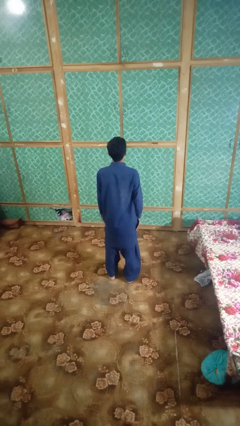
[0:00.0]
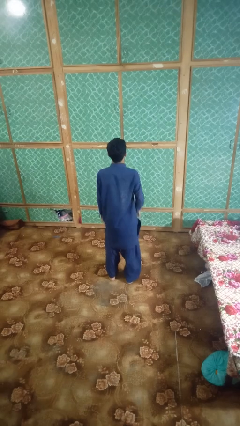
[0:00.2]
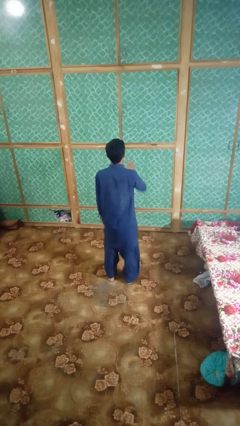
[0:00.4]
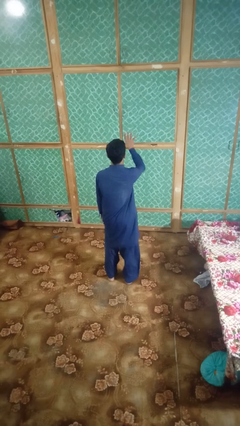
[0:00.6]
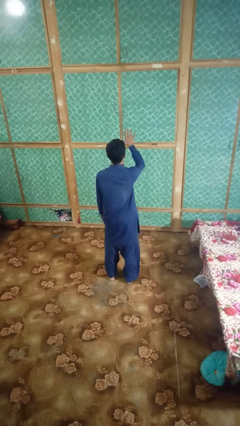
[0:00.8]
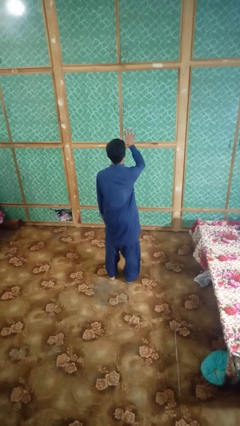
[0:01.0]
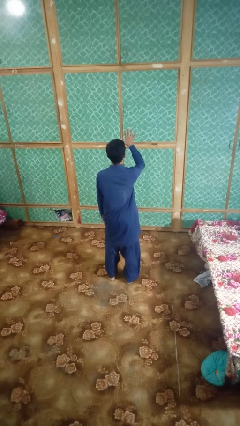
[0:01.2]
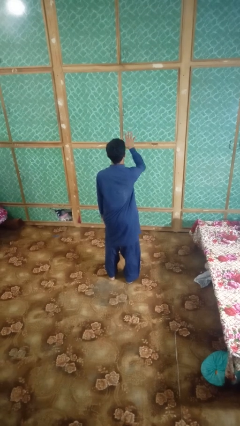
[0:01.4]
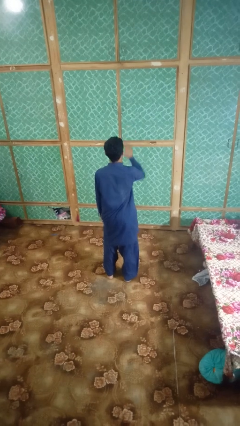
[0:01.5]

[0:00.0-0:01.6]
person gestures number five

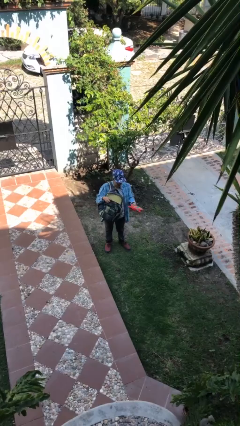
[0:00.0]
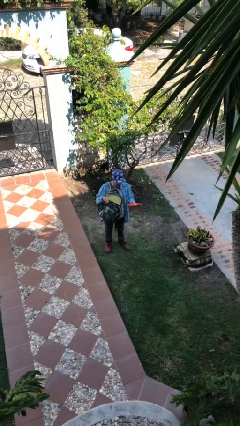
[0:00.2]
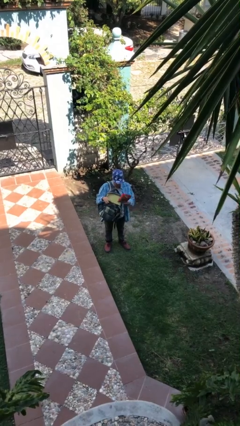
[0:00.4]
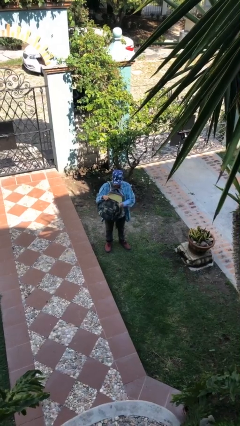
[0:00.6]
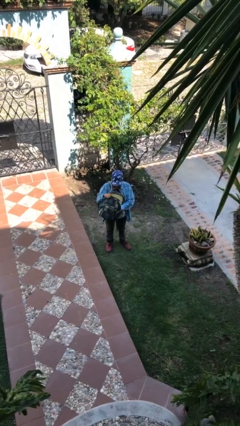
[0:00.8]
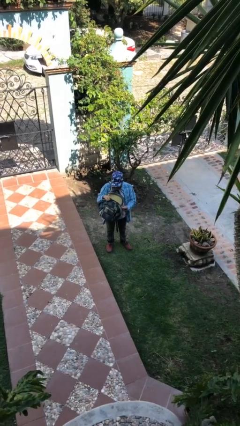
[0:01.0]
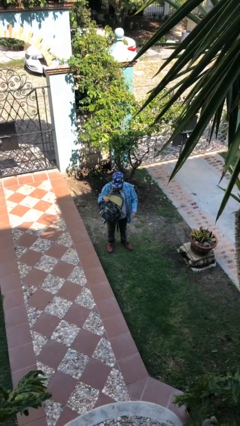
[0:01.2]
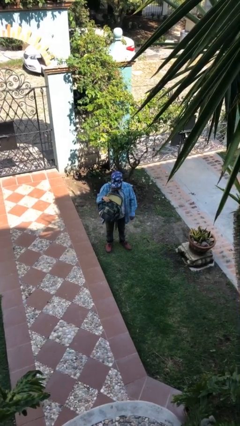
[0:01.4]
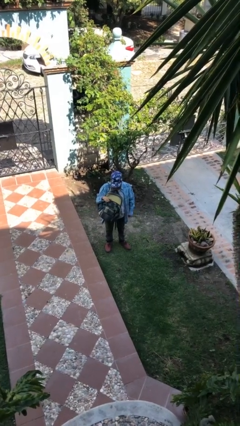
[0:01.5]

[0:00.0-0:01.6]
person puts object into backpack

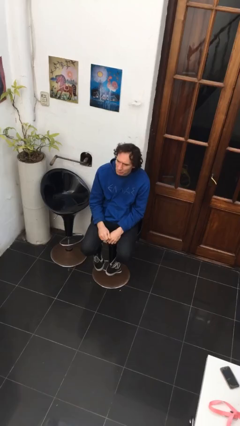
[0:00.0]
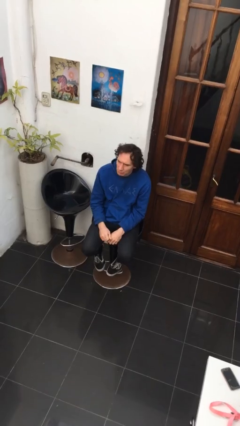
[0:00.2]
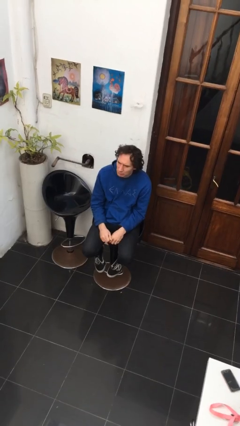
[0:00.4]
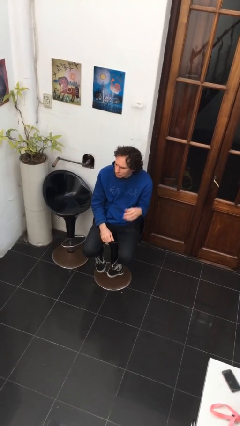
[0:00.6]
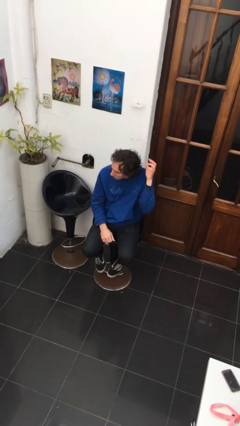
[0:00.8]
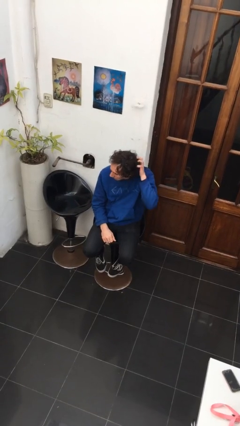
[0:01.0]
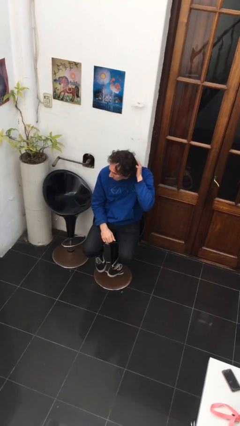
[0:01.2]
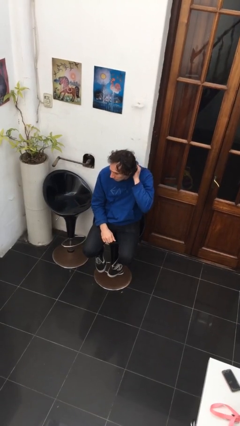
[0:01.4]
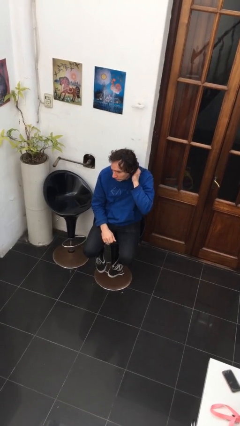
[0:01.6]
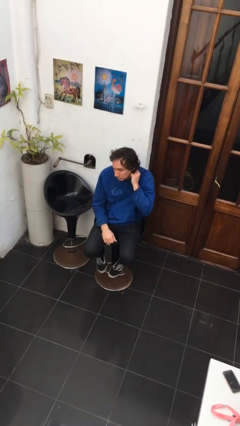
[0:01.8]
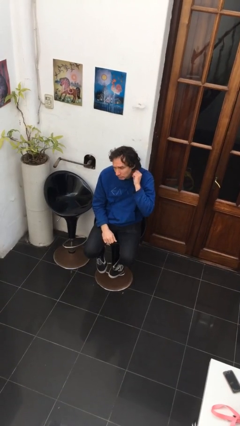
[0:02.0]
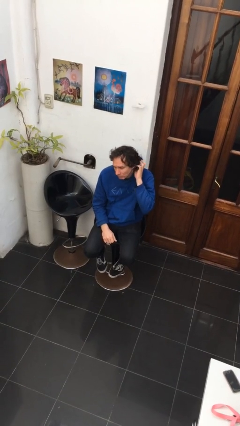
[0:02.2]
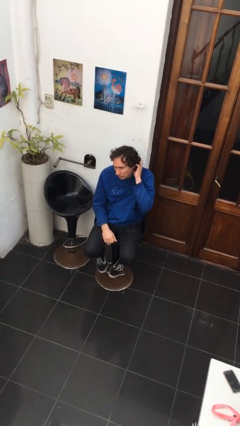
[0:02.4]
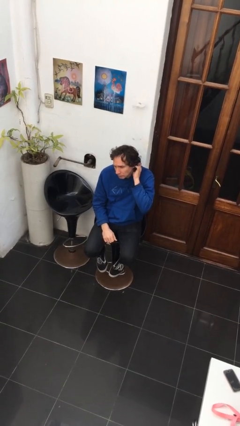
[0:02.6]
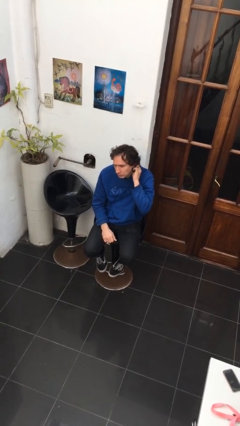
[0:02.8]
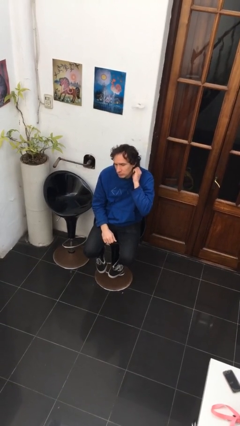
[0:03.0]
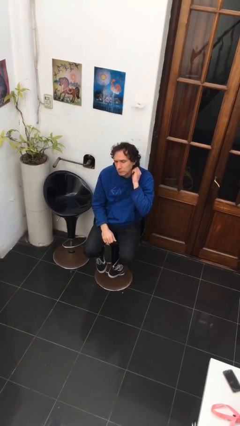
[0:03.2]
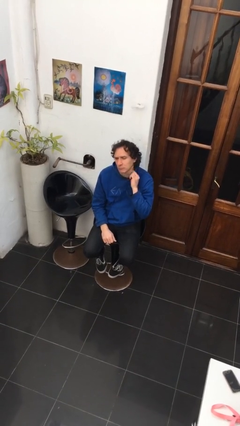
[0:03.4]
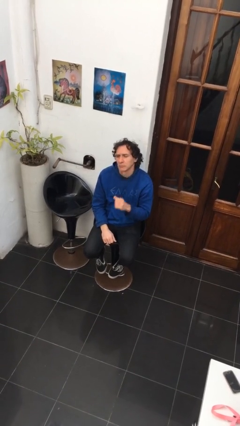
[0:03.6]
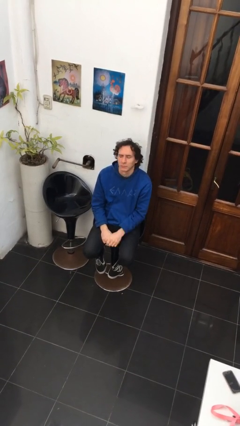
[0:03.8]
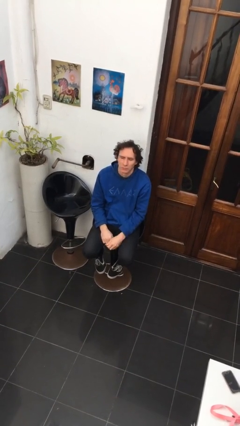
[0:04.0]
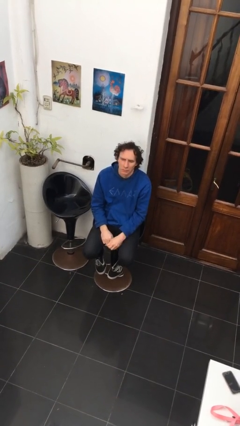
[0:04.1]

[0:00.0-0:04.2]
person strokes hair

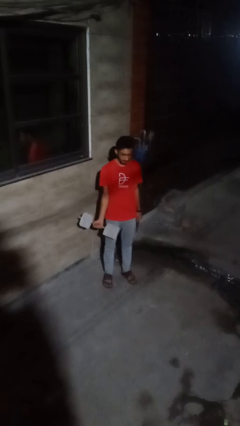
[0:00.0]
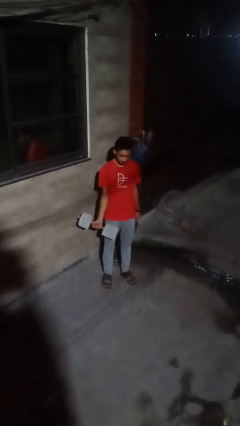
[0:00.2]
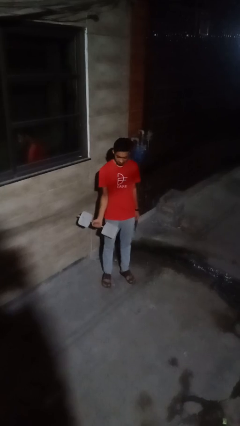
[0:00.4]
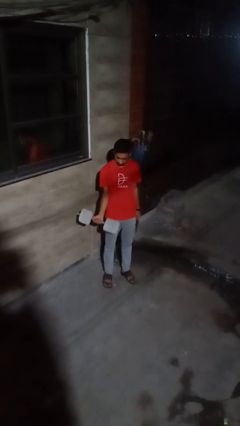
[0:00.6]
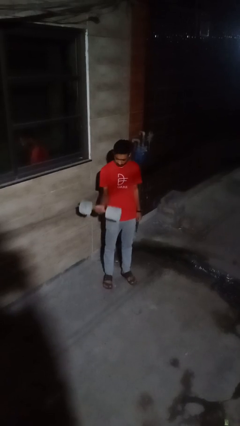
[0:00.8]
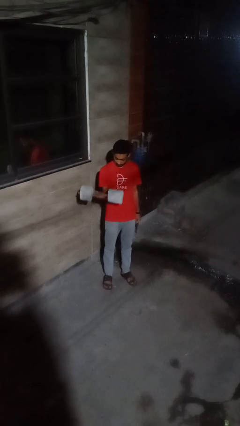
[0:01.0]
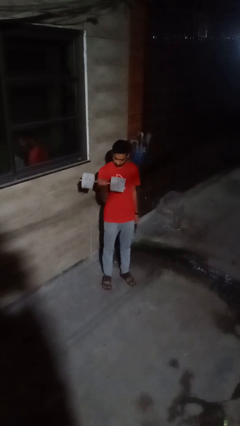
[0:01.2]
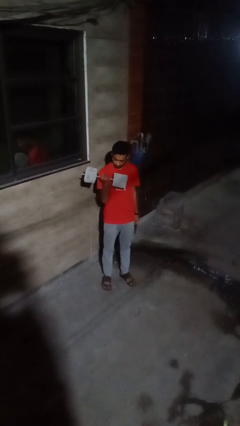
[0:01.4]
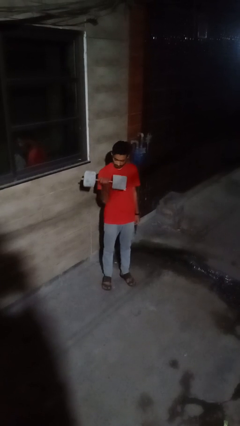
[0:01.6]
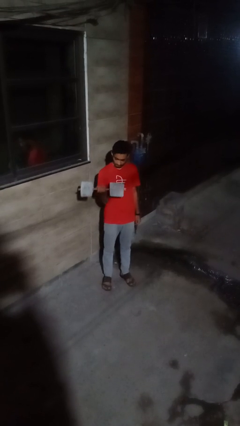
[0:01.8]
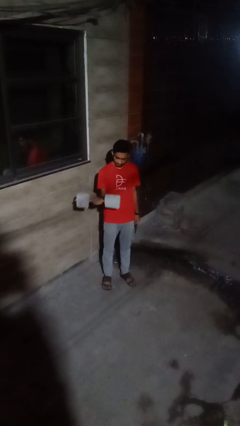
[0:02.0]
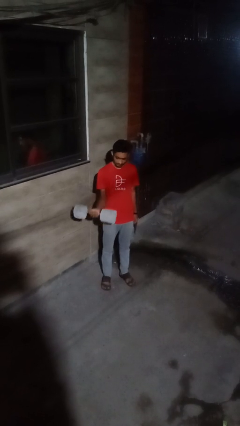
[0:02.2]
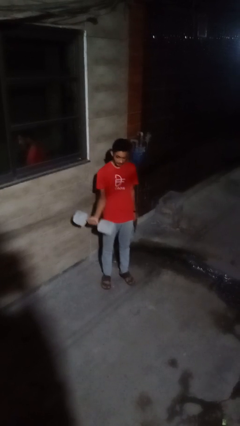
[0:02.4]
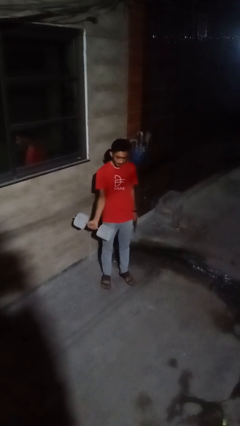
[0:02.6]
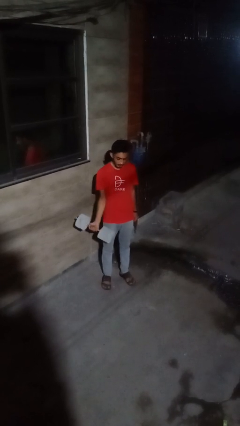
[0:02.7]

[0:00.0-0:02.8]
person lifts dumbbells

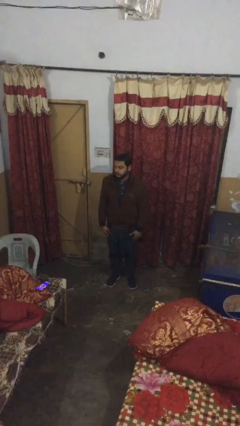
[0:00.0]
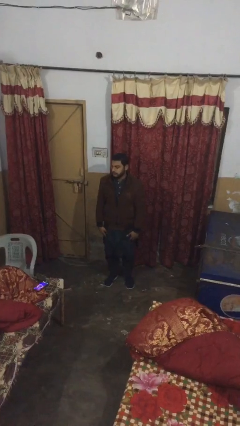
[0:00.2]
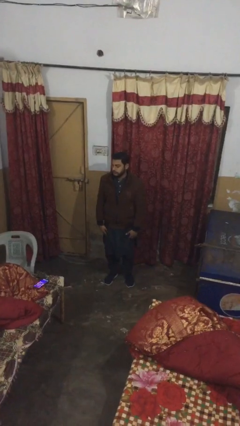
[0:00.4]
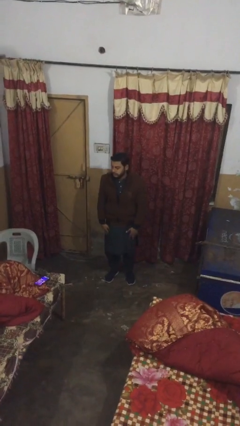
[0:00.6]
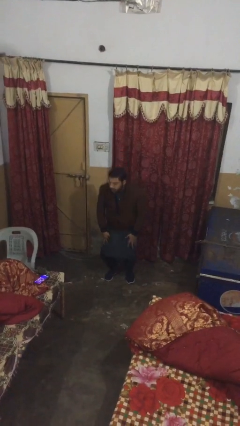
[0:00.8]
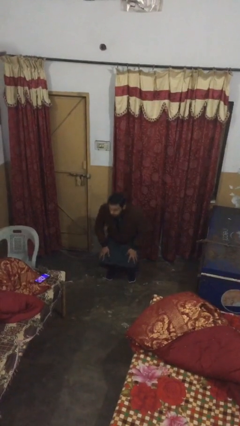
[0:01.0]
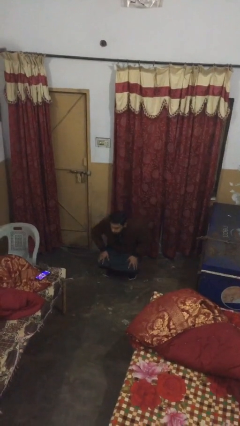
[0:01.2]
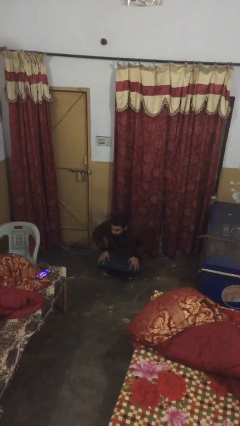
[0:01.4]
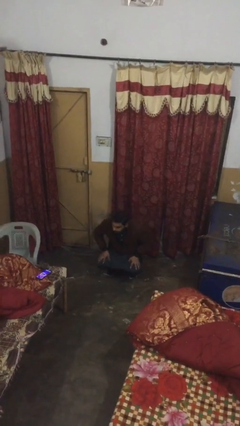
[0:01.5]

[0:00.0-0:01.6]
person sits down

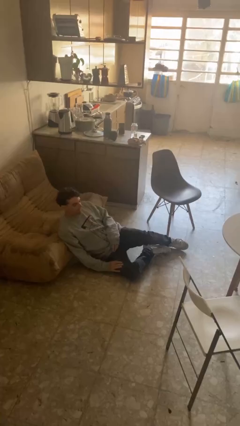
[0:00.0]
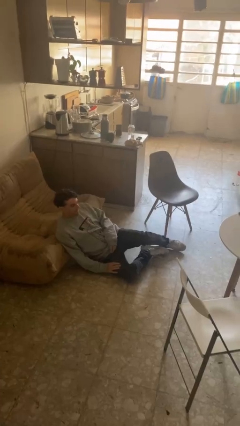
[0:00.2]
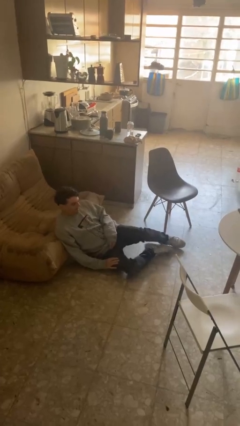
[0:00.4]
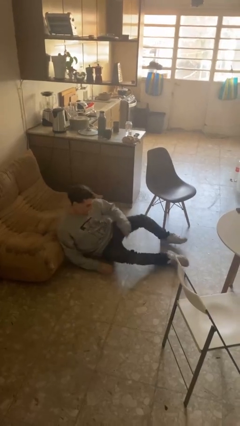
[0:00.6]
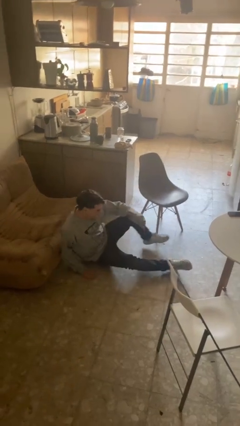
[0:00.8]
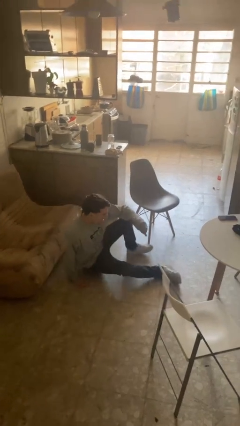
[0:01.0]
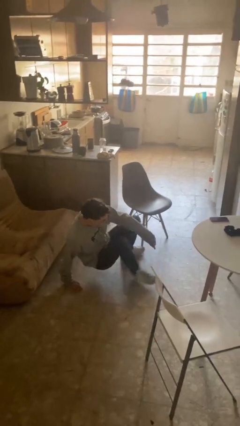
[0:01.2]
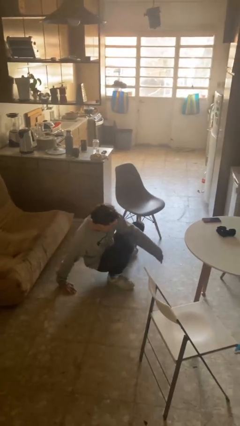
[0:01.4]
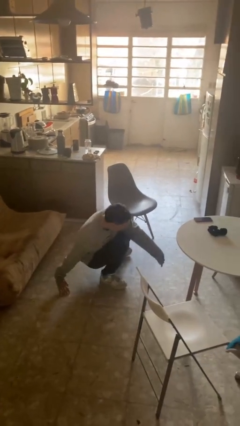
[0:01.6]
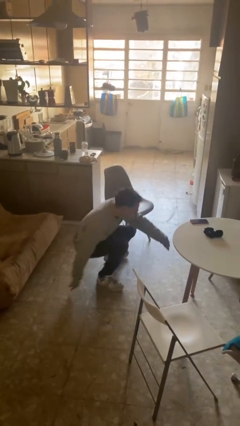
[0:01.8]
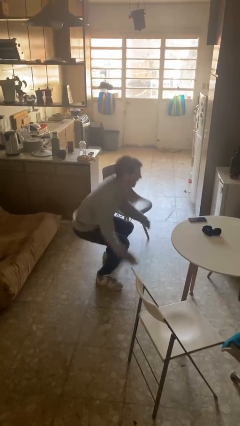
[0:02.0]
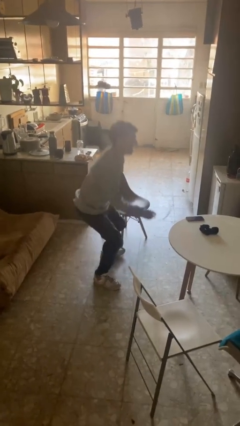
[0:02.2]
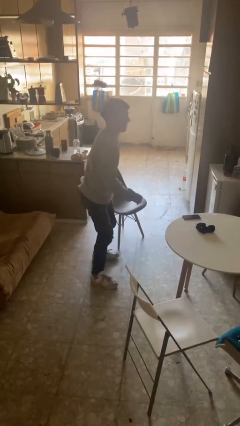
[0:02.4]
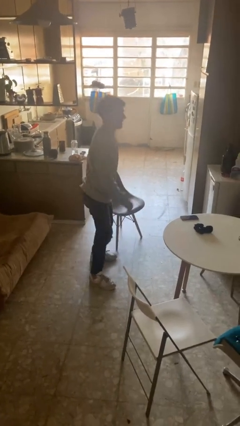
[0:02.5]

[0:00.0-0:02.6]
person stands up from floor

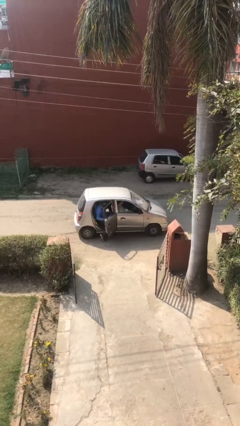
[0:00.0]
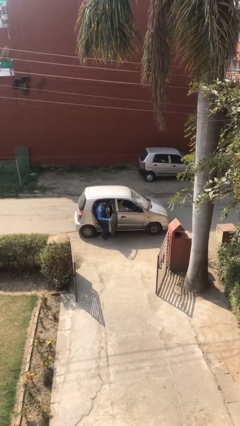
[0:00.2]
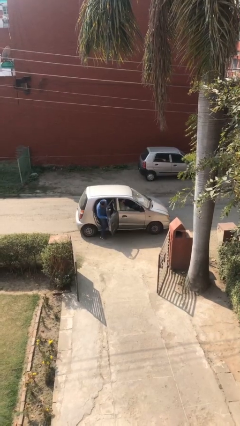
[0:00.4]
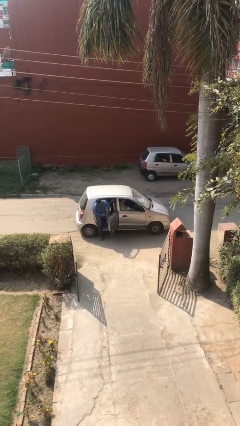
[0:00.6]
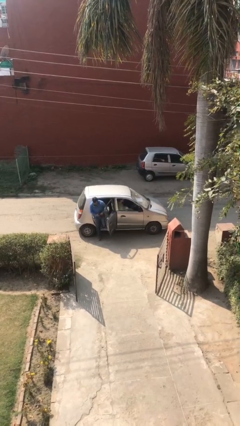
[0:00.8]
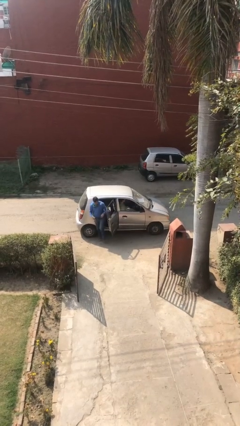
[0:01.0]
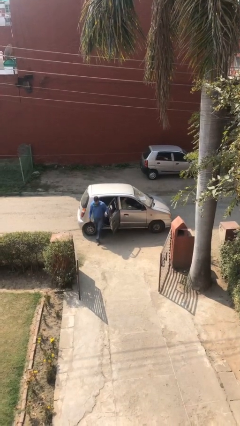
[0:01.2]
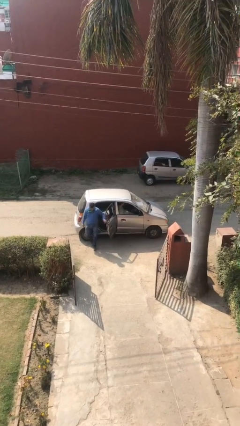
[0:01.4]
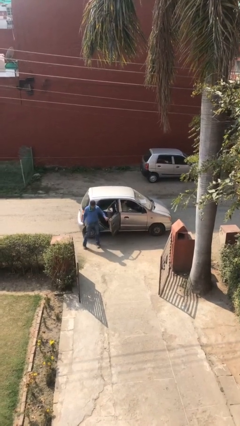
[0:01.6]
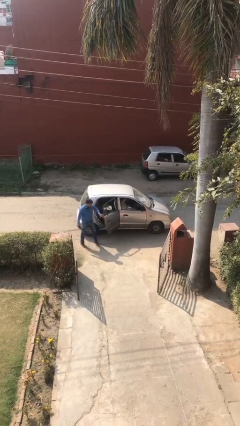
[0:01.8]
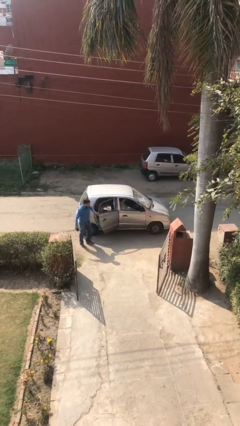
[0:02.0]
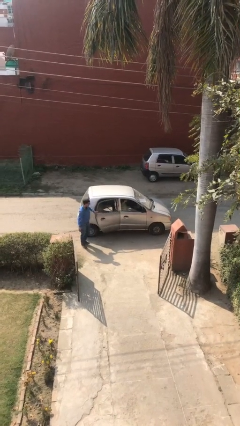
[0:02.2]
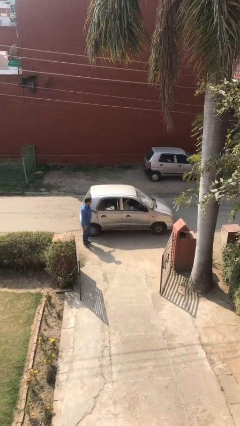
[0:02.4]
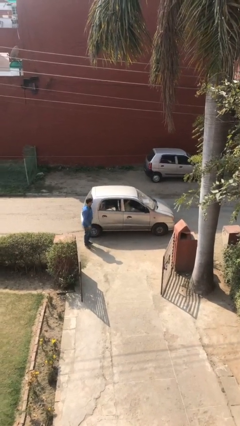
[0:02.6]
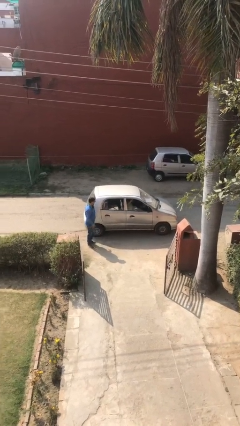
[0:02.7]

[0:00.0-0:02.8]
car drops off person
